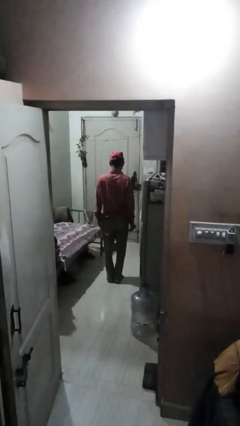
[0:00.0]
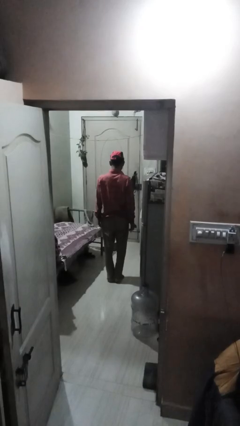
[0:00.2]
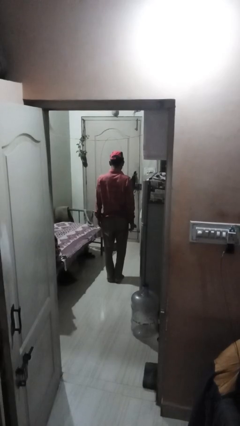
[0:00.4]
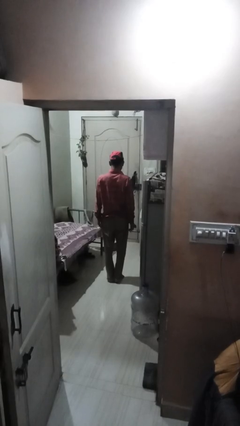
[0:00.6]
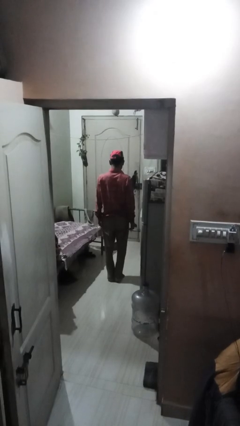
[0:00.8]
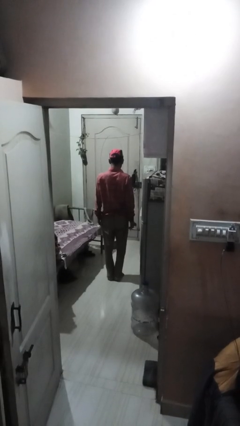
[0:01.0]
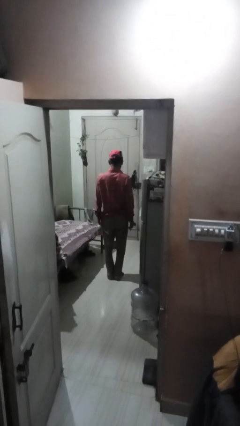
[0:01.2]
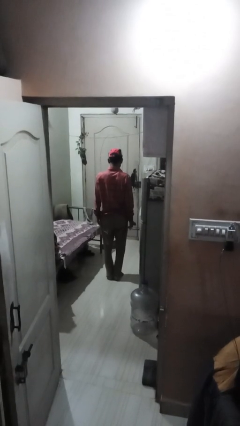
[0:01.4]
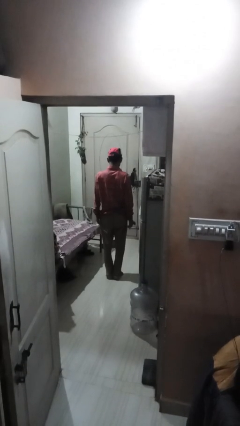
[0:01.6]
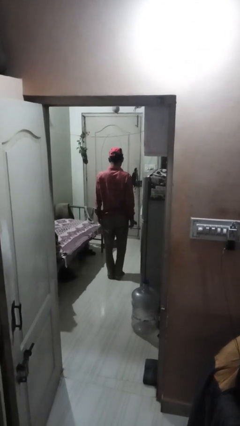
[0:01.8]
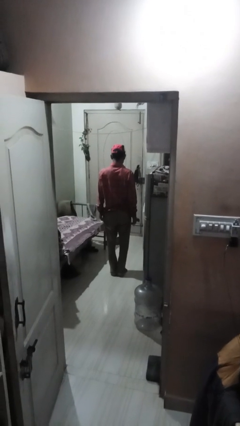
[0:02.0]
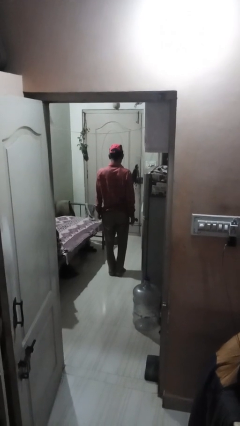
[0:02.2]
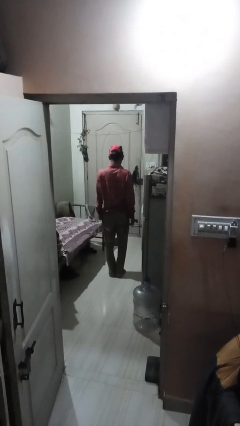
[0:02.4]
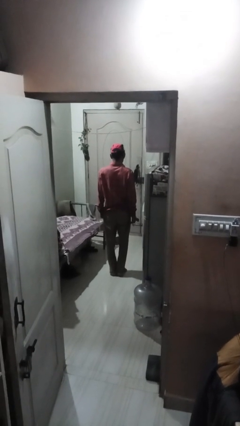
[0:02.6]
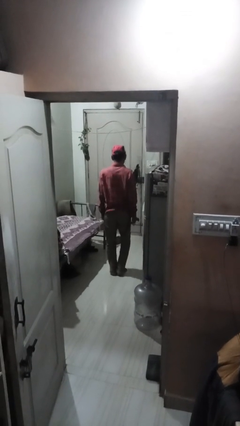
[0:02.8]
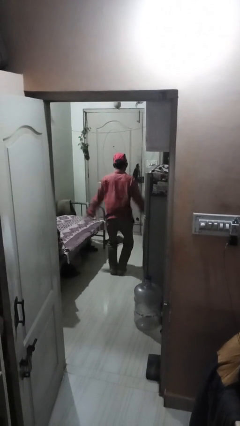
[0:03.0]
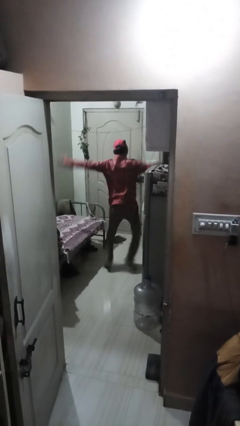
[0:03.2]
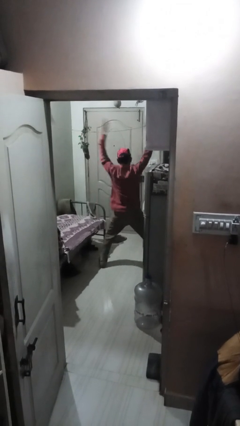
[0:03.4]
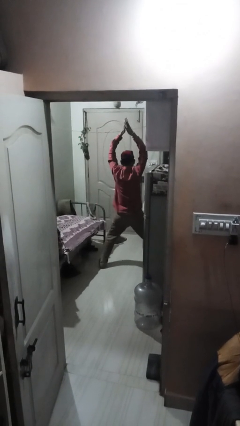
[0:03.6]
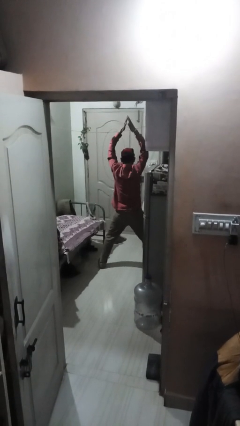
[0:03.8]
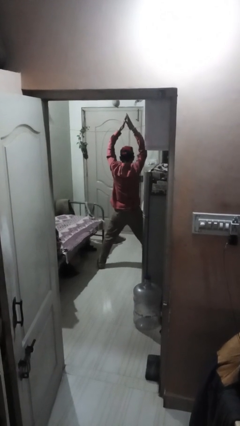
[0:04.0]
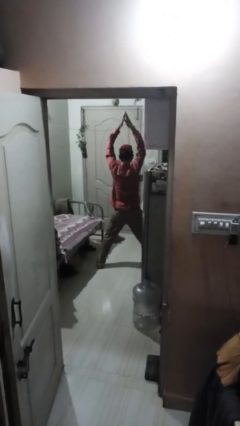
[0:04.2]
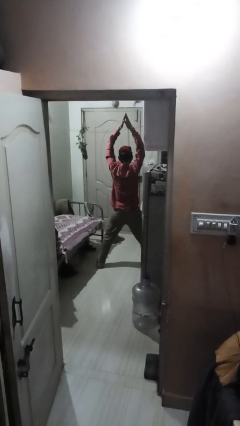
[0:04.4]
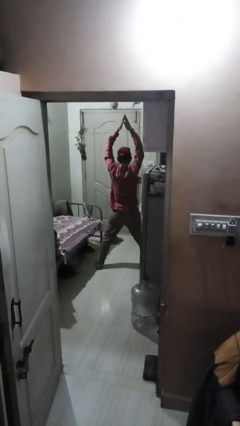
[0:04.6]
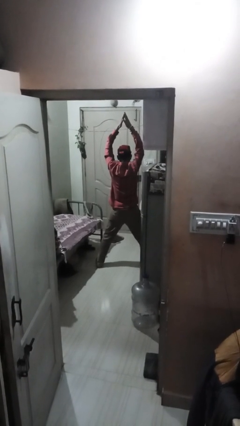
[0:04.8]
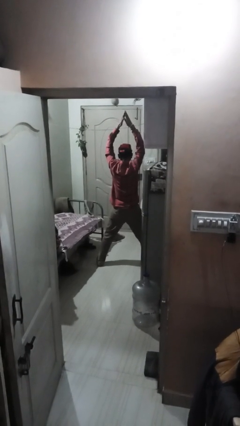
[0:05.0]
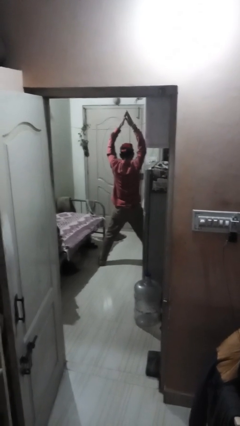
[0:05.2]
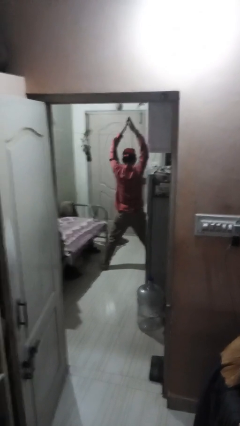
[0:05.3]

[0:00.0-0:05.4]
person exercises with jumping jacks

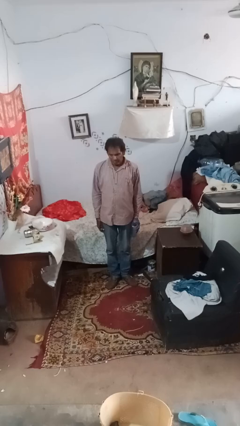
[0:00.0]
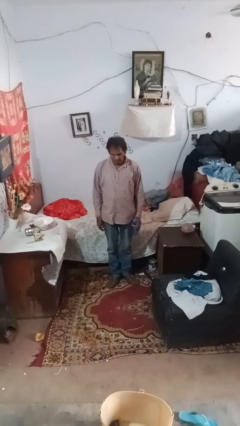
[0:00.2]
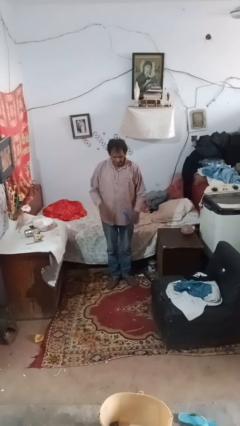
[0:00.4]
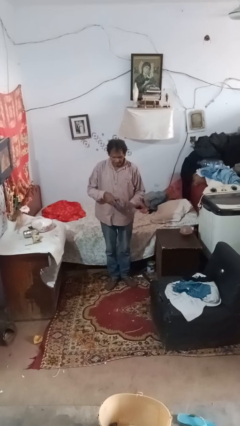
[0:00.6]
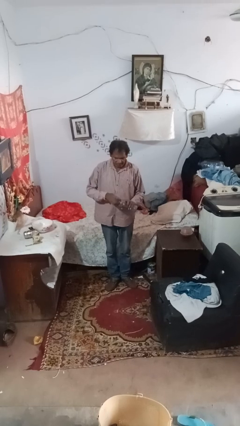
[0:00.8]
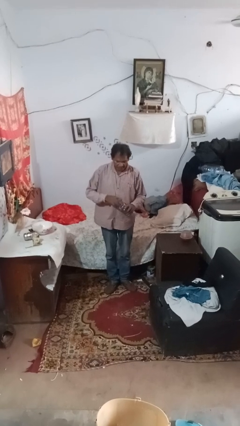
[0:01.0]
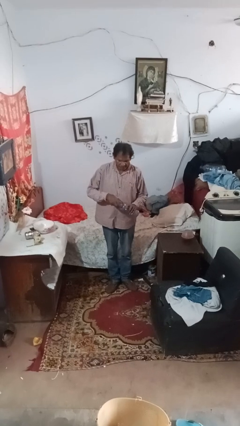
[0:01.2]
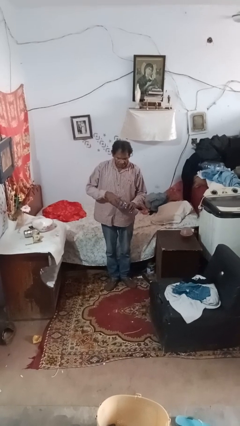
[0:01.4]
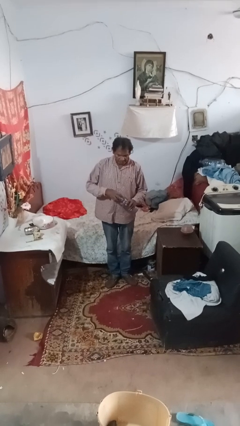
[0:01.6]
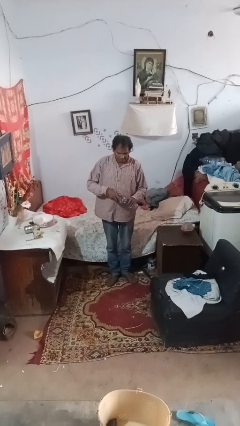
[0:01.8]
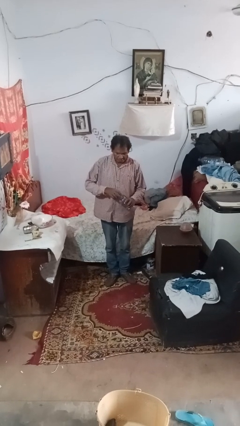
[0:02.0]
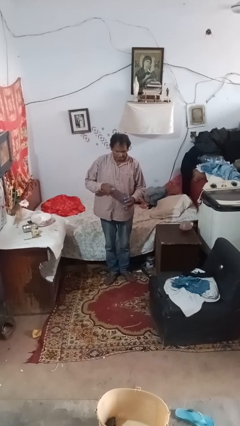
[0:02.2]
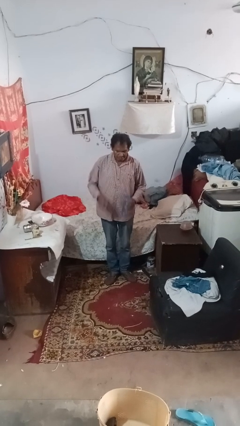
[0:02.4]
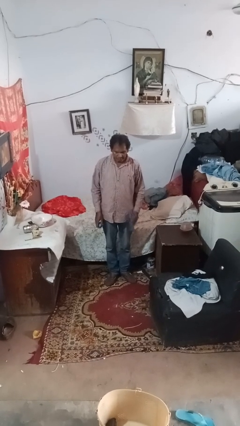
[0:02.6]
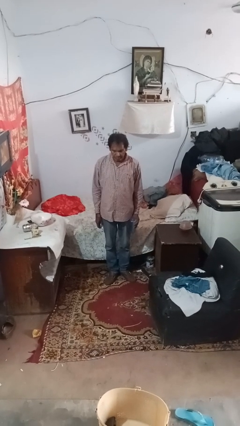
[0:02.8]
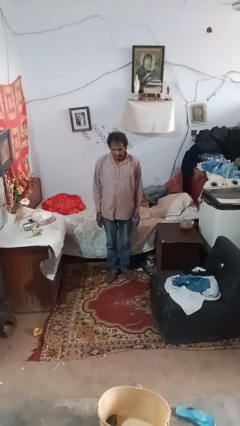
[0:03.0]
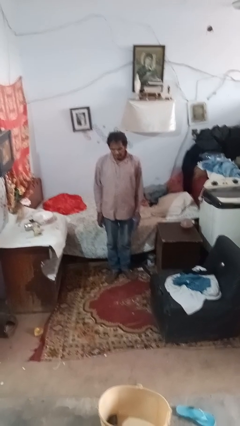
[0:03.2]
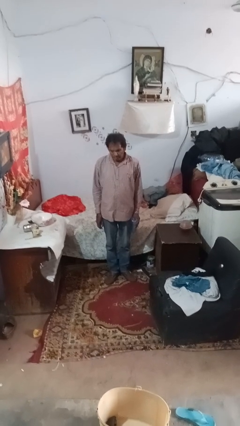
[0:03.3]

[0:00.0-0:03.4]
person unscrews lid from bottle

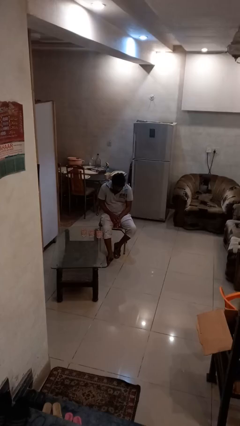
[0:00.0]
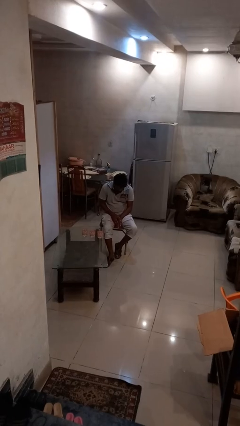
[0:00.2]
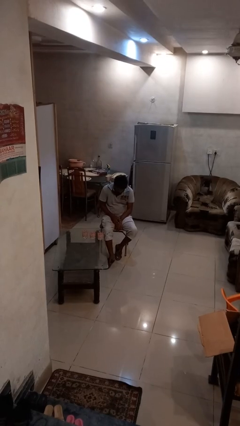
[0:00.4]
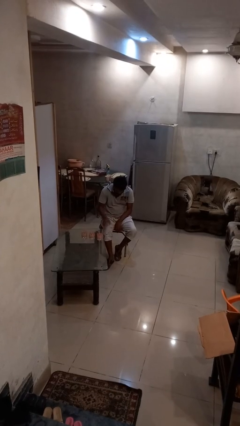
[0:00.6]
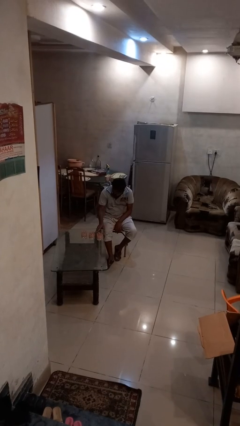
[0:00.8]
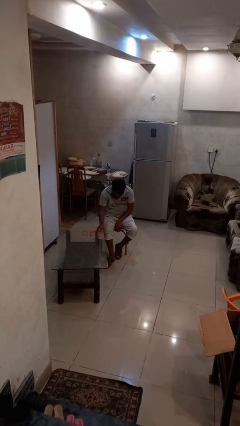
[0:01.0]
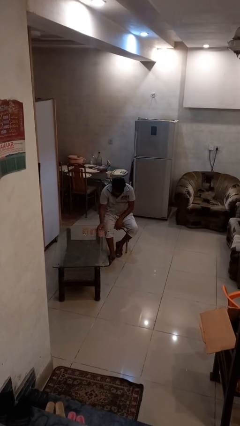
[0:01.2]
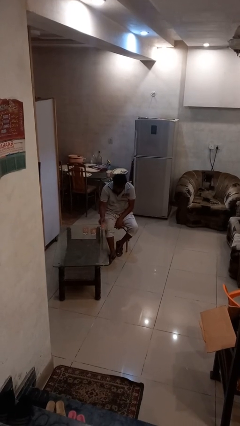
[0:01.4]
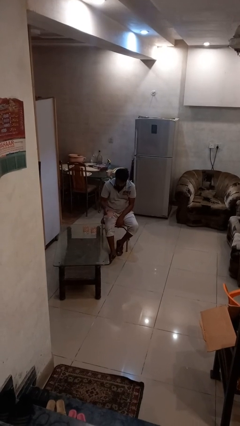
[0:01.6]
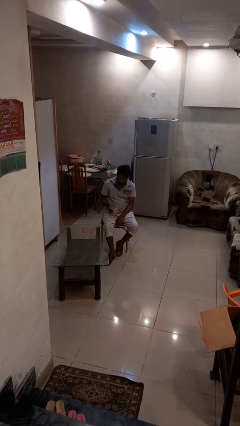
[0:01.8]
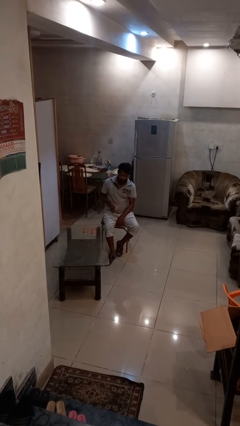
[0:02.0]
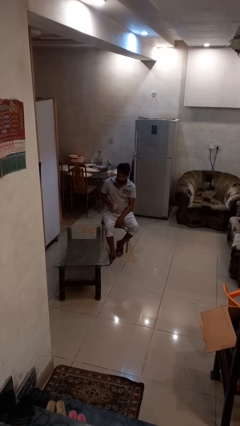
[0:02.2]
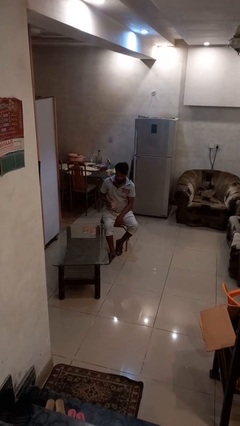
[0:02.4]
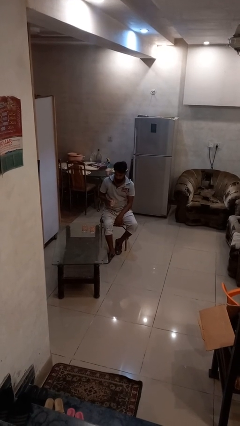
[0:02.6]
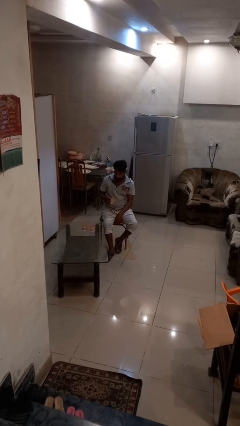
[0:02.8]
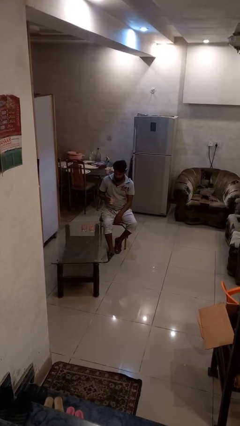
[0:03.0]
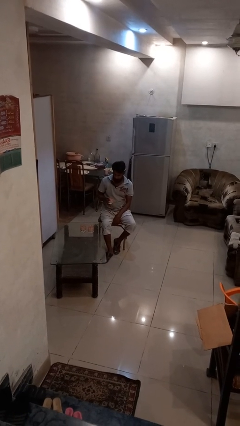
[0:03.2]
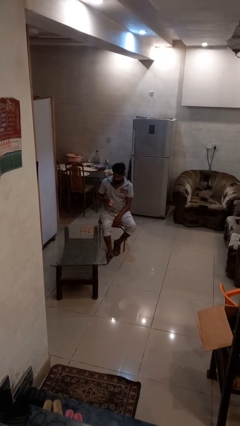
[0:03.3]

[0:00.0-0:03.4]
person picks up object from table

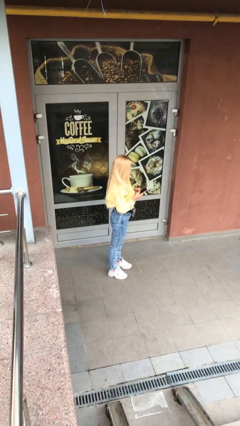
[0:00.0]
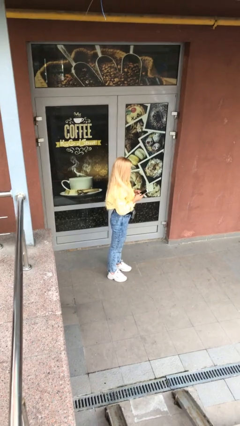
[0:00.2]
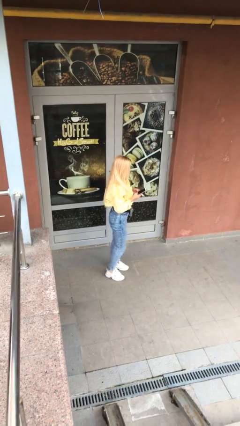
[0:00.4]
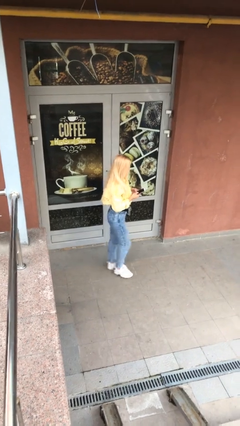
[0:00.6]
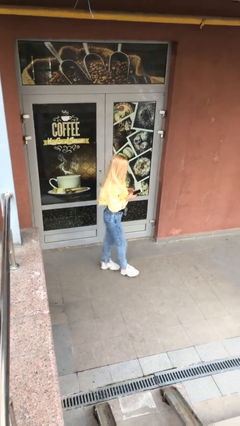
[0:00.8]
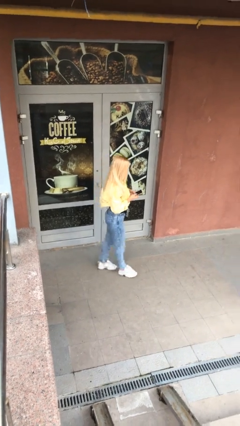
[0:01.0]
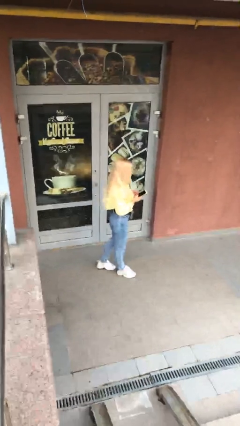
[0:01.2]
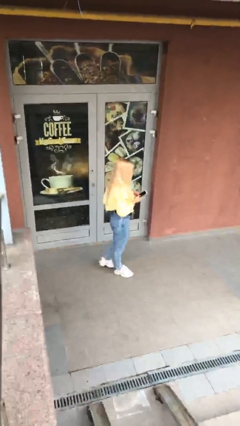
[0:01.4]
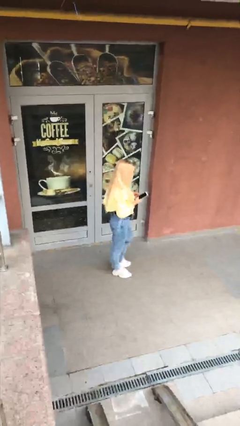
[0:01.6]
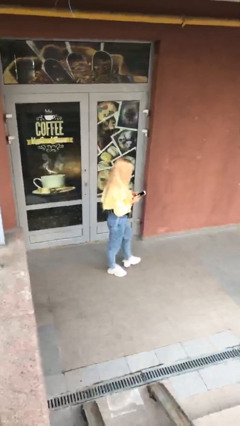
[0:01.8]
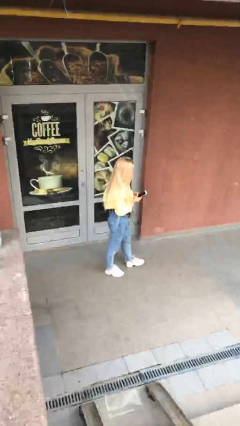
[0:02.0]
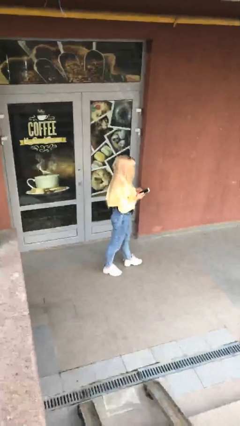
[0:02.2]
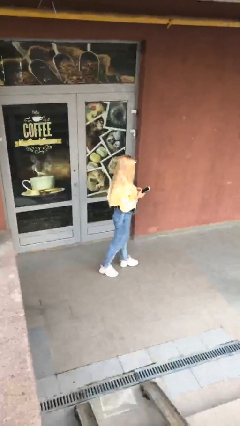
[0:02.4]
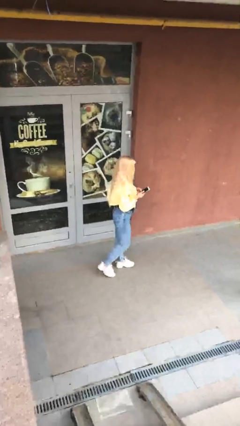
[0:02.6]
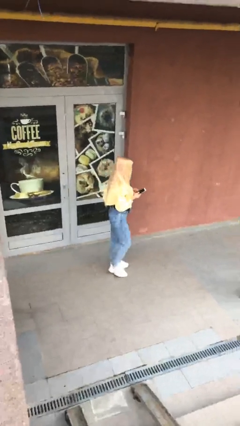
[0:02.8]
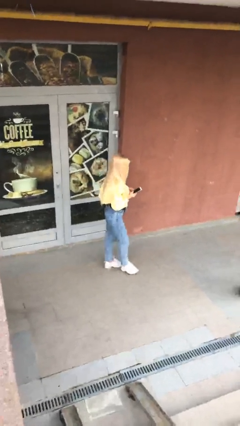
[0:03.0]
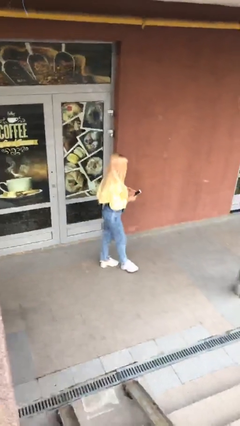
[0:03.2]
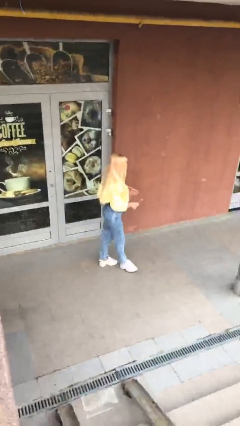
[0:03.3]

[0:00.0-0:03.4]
person texts on phone

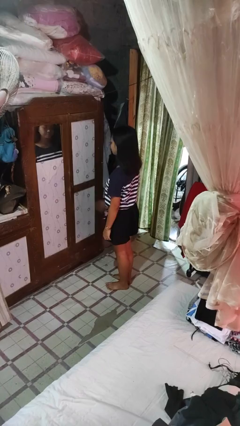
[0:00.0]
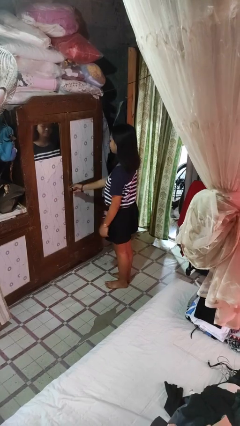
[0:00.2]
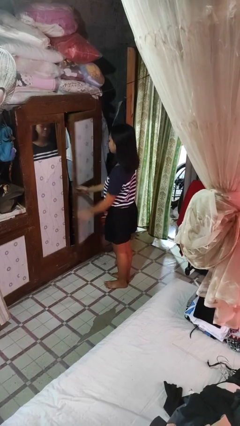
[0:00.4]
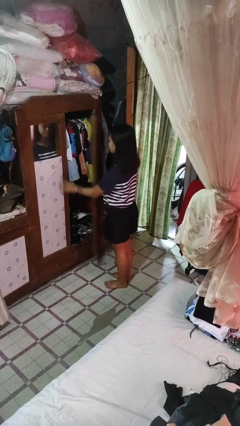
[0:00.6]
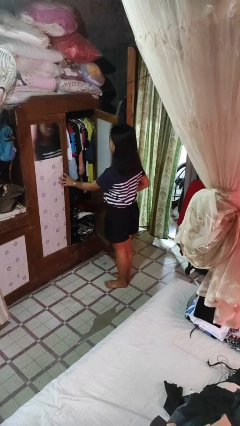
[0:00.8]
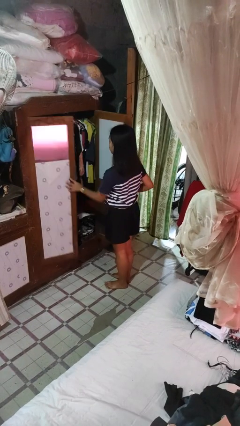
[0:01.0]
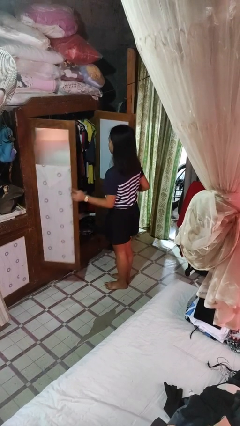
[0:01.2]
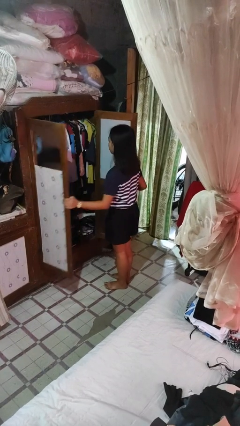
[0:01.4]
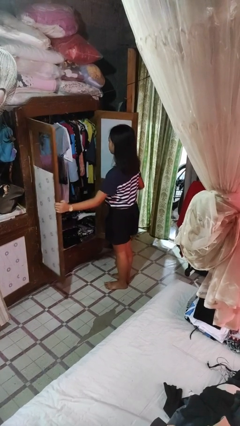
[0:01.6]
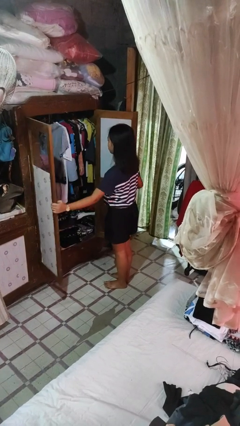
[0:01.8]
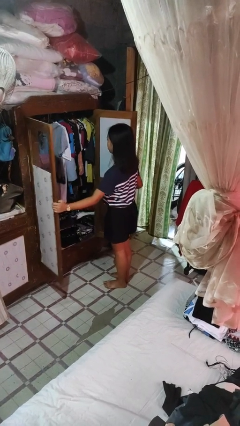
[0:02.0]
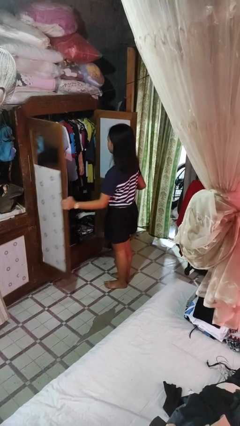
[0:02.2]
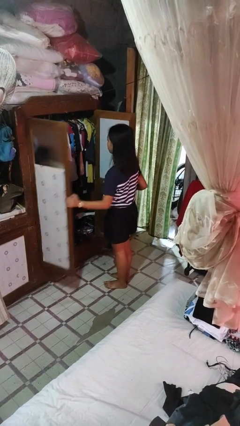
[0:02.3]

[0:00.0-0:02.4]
person opens closet door
